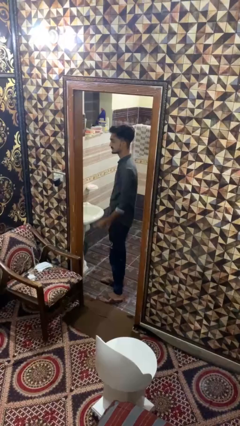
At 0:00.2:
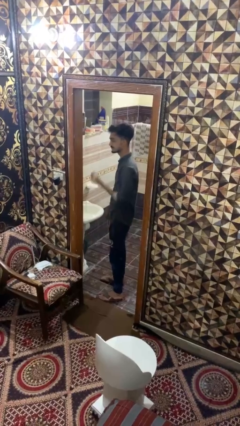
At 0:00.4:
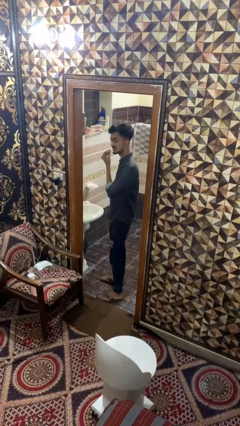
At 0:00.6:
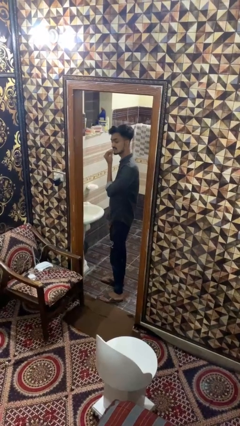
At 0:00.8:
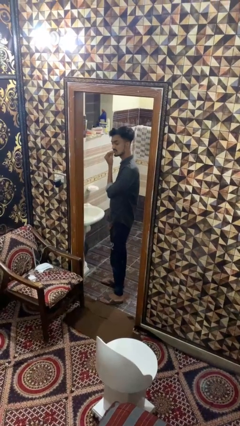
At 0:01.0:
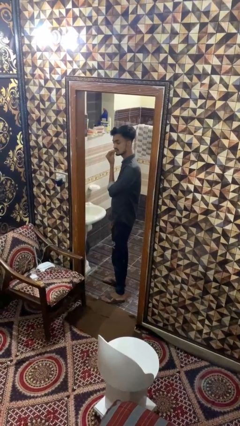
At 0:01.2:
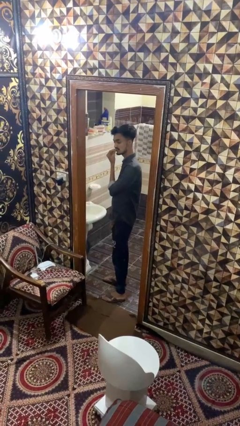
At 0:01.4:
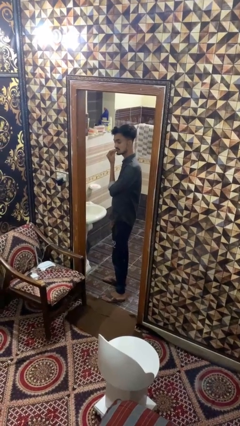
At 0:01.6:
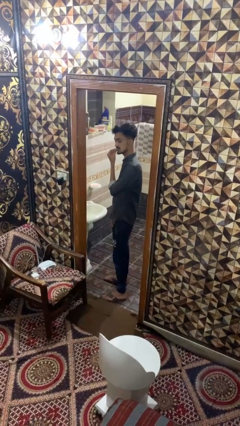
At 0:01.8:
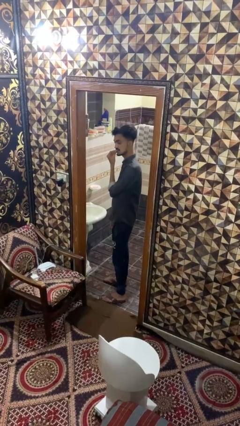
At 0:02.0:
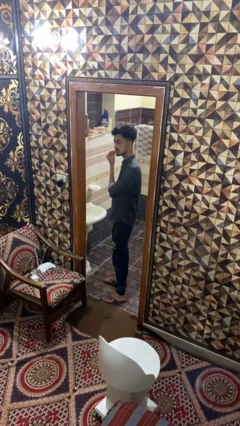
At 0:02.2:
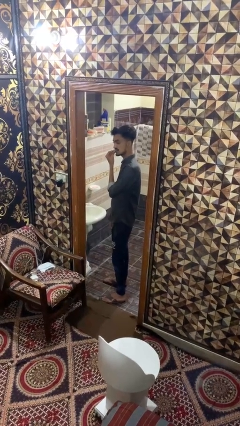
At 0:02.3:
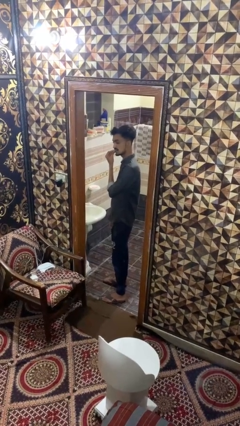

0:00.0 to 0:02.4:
person flosses

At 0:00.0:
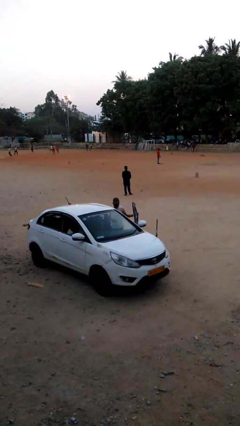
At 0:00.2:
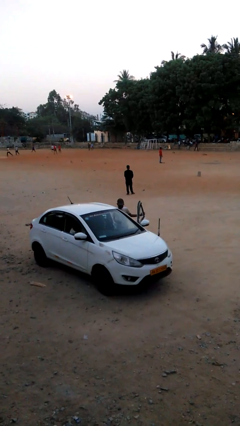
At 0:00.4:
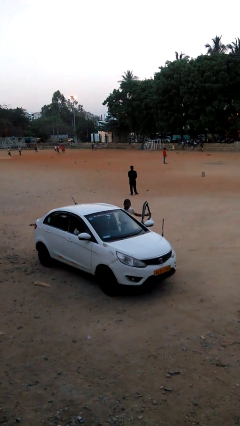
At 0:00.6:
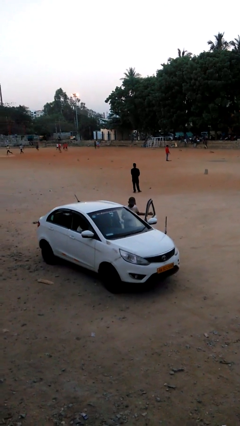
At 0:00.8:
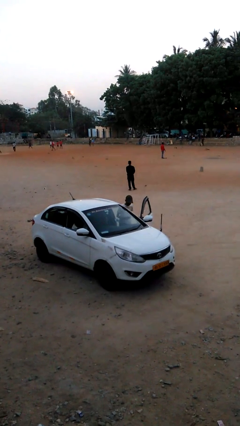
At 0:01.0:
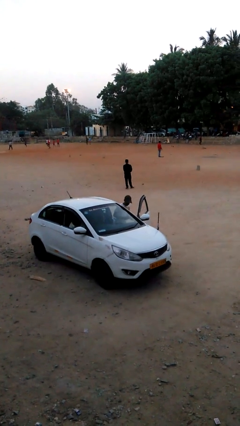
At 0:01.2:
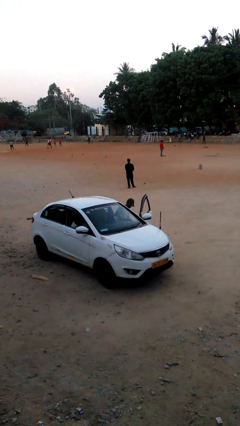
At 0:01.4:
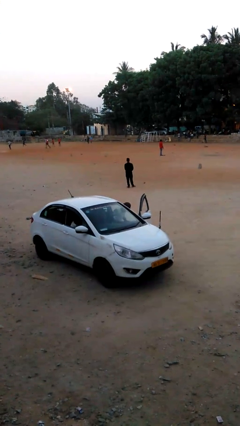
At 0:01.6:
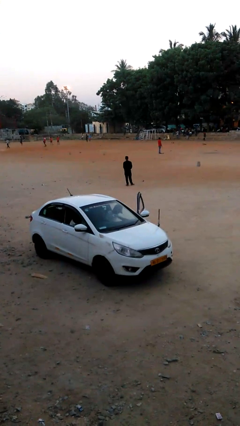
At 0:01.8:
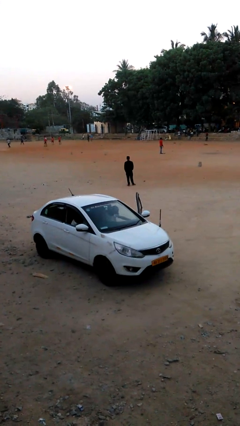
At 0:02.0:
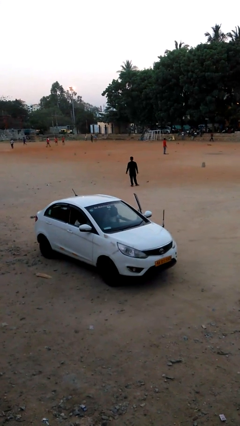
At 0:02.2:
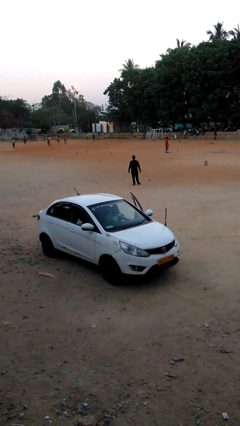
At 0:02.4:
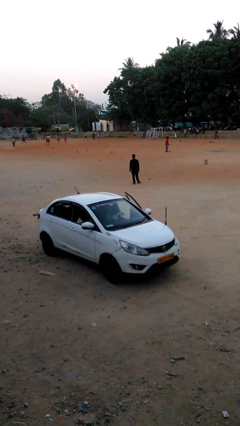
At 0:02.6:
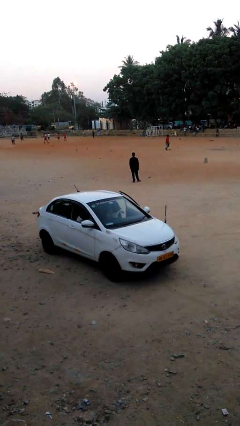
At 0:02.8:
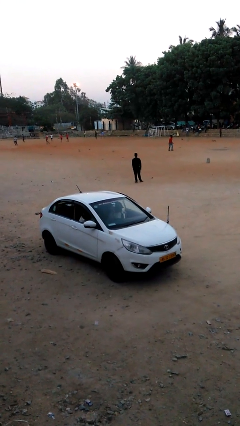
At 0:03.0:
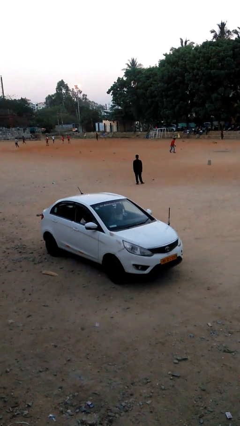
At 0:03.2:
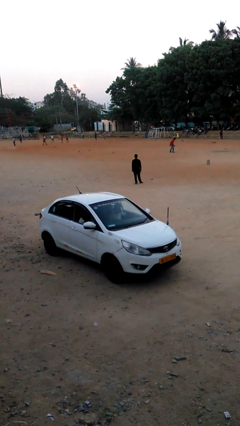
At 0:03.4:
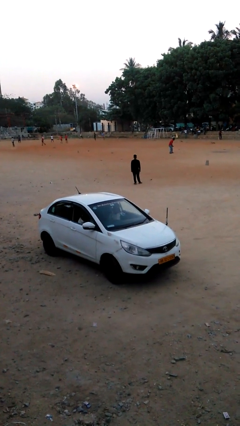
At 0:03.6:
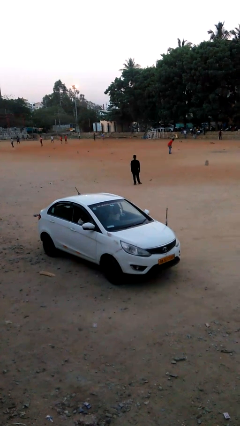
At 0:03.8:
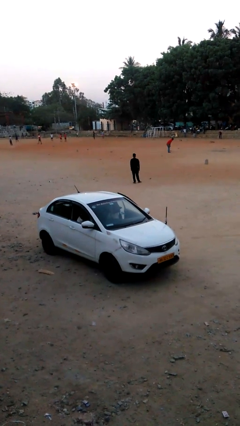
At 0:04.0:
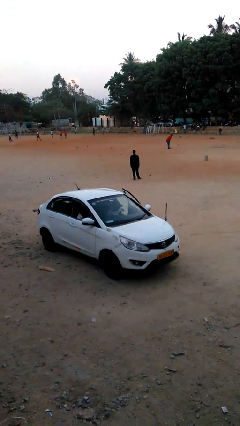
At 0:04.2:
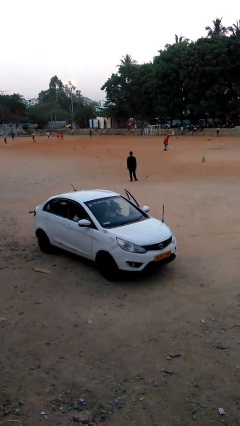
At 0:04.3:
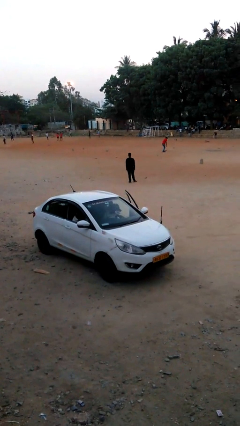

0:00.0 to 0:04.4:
person enters car

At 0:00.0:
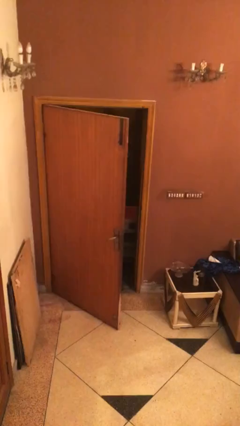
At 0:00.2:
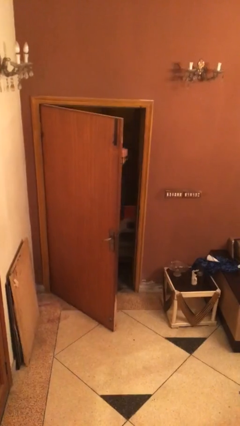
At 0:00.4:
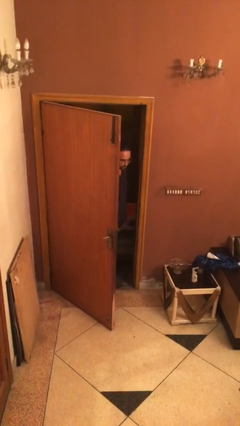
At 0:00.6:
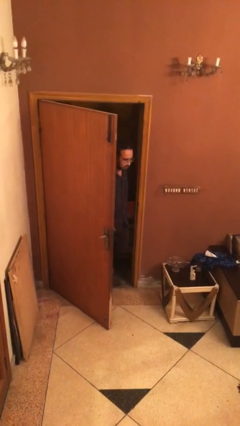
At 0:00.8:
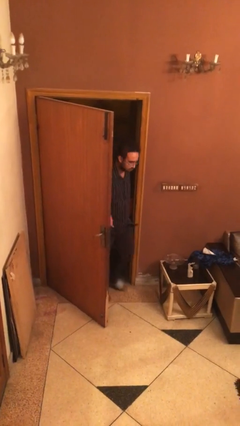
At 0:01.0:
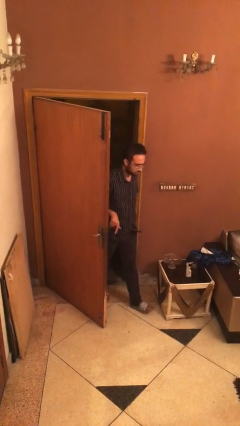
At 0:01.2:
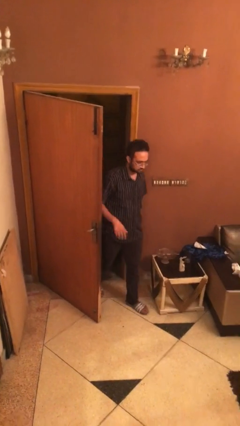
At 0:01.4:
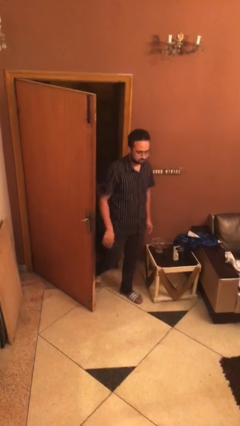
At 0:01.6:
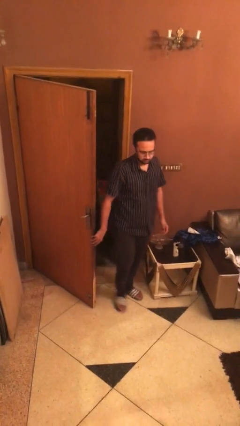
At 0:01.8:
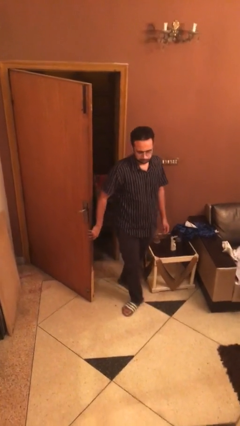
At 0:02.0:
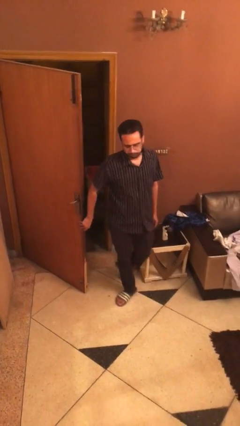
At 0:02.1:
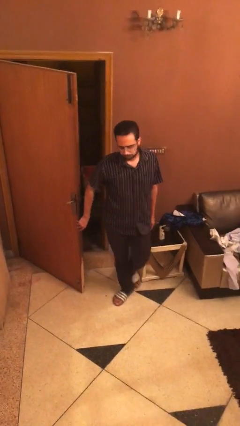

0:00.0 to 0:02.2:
person enters scene through structure

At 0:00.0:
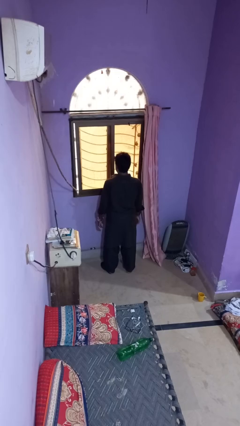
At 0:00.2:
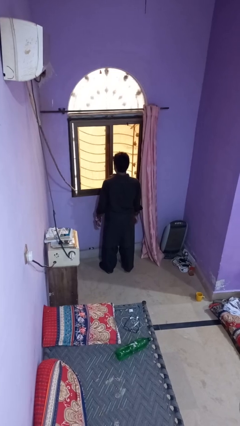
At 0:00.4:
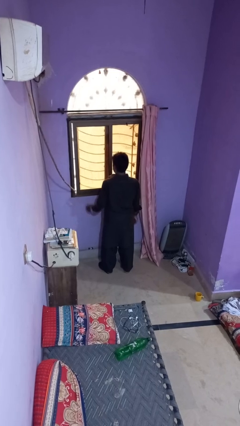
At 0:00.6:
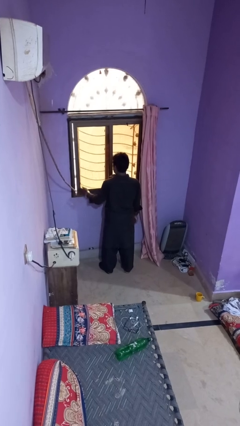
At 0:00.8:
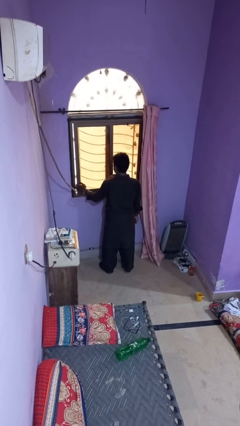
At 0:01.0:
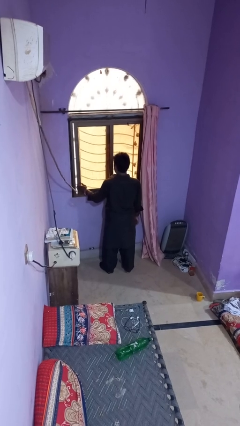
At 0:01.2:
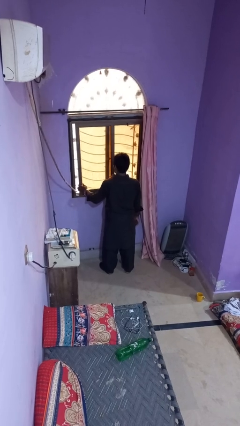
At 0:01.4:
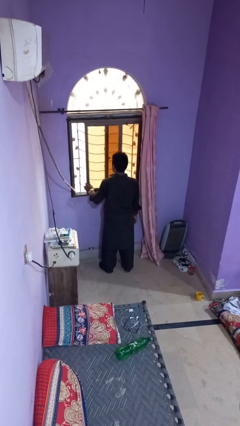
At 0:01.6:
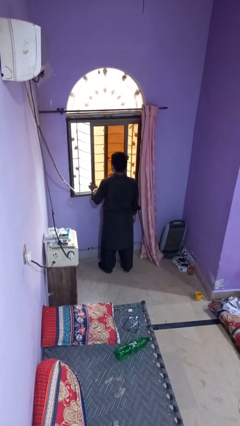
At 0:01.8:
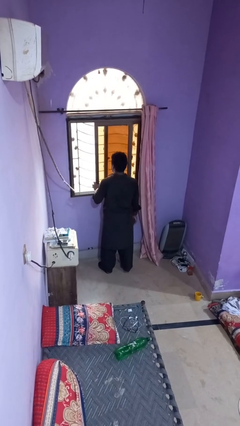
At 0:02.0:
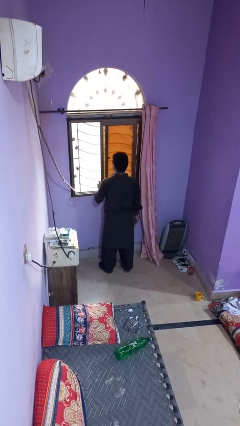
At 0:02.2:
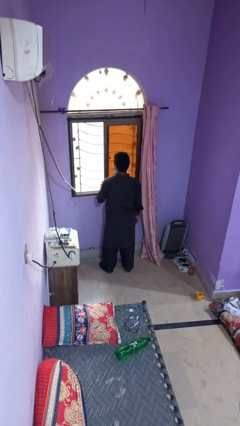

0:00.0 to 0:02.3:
person opens home window

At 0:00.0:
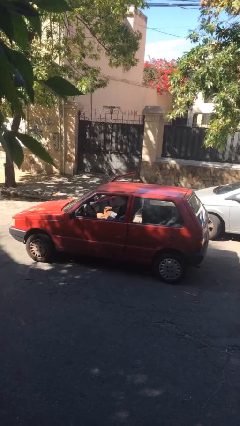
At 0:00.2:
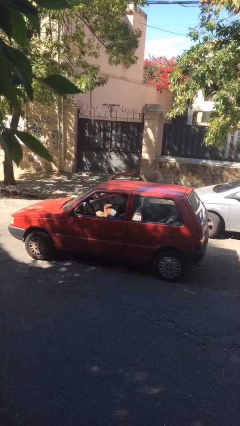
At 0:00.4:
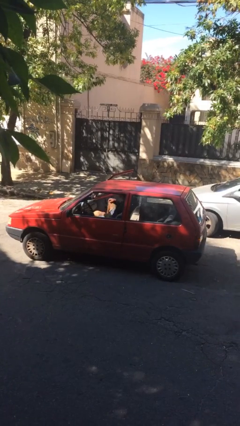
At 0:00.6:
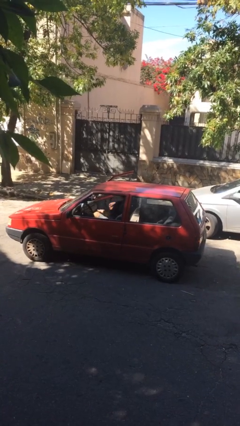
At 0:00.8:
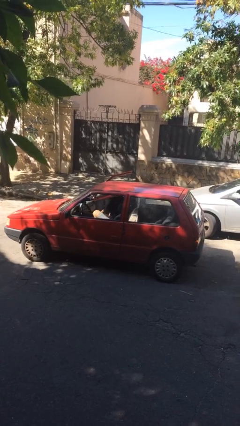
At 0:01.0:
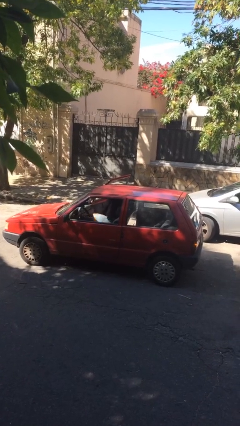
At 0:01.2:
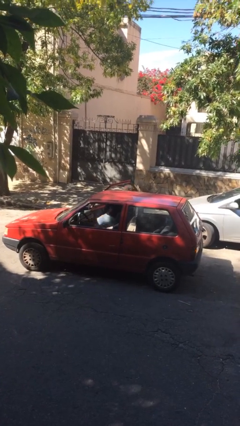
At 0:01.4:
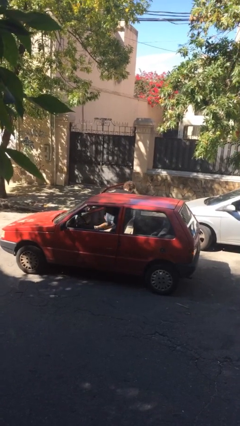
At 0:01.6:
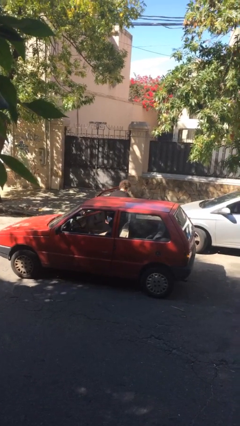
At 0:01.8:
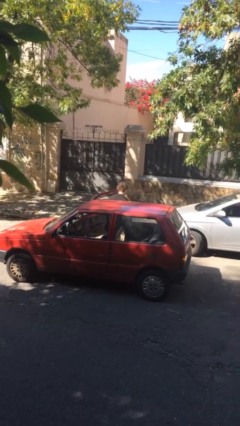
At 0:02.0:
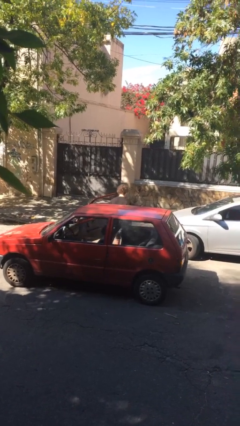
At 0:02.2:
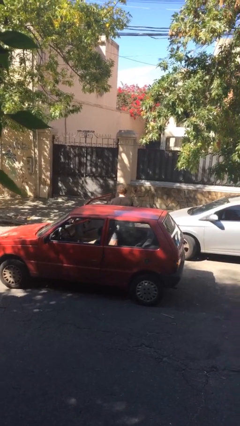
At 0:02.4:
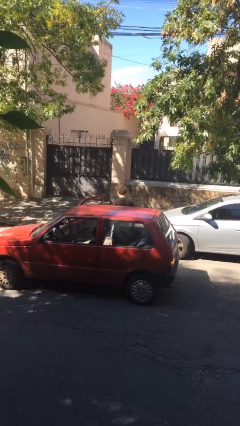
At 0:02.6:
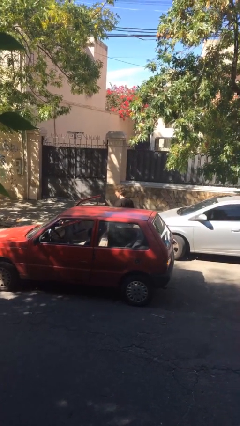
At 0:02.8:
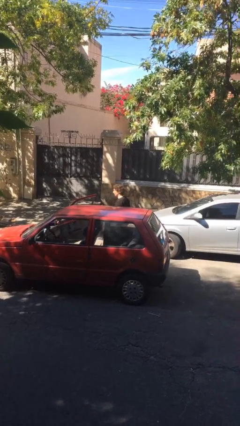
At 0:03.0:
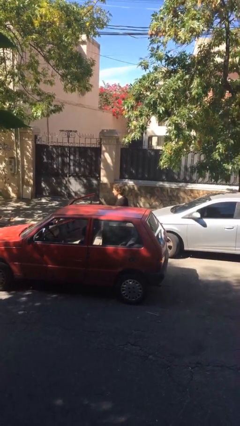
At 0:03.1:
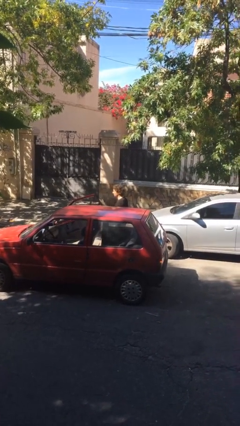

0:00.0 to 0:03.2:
person exits car

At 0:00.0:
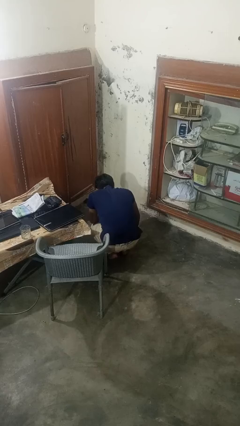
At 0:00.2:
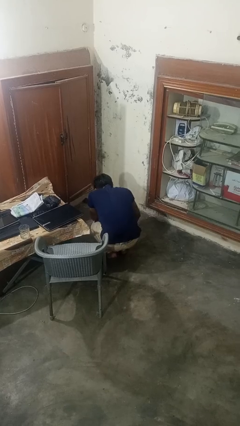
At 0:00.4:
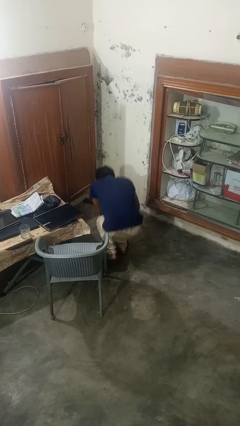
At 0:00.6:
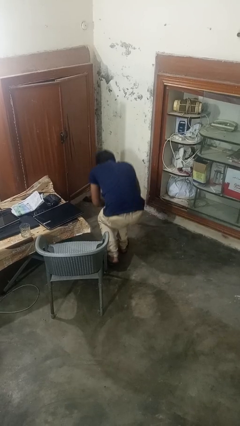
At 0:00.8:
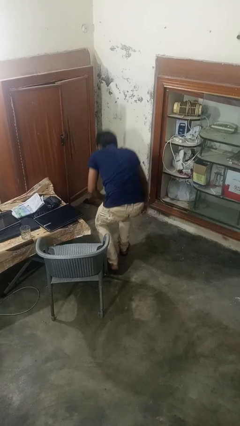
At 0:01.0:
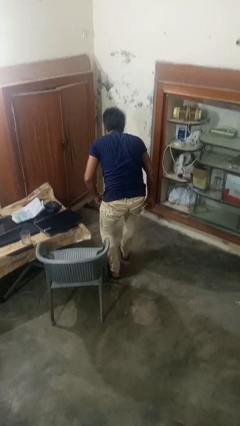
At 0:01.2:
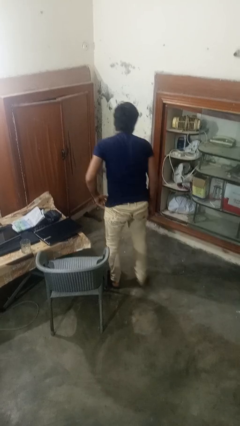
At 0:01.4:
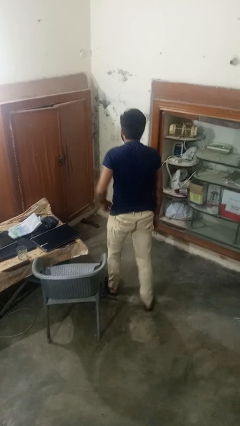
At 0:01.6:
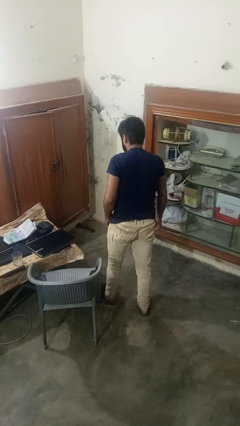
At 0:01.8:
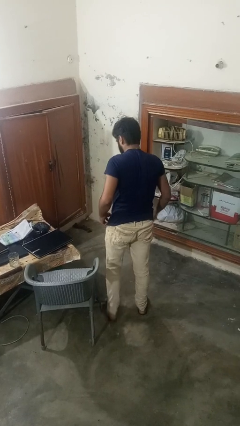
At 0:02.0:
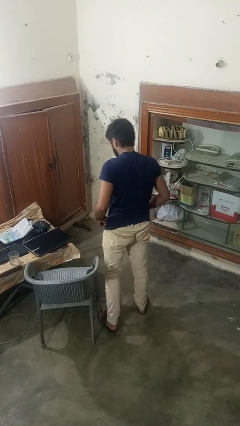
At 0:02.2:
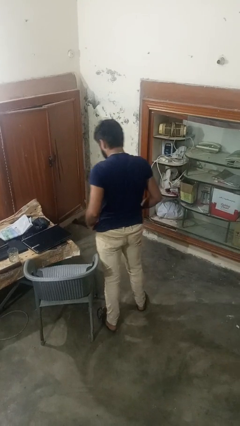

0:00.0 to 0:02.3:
person stands up from floor

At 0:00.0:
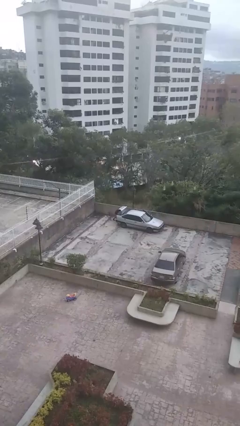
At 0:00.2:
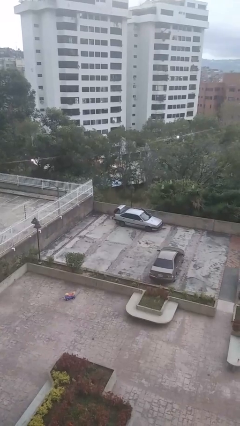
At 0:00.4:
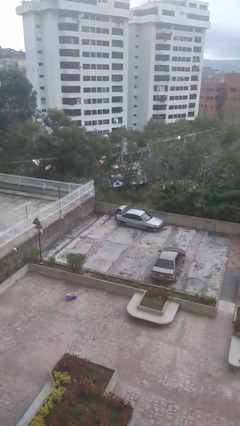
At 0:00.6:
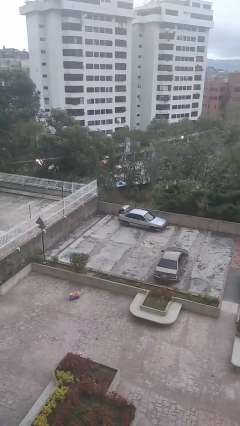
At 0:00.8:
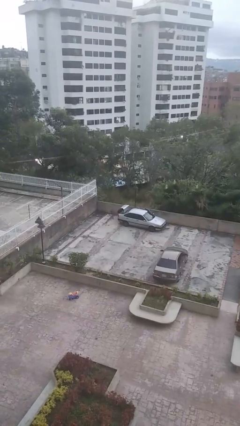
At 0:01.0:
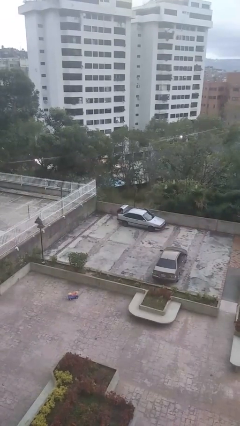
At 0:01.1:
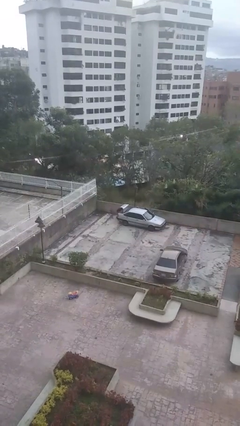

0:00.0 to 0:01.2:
person loads car
